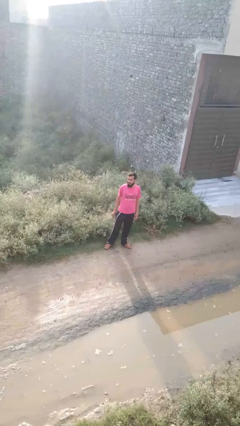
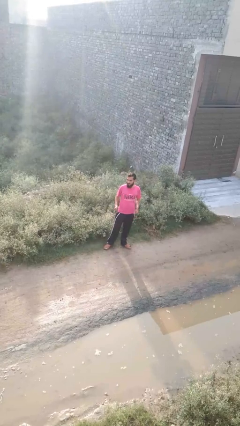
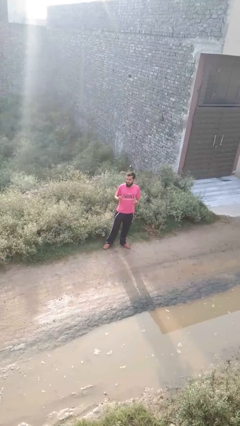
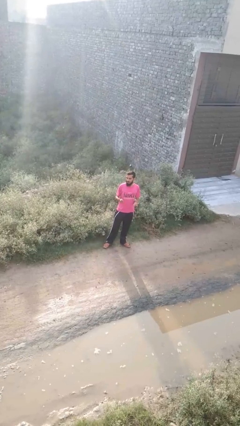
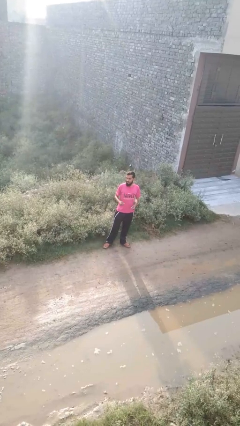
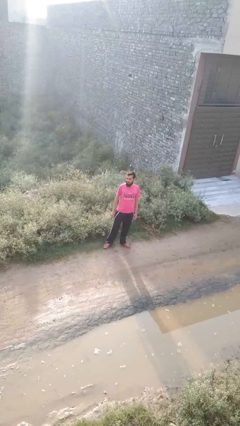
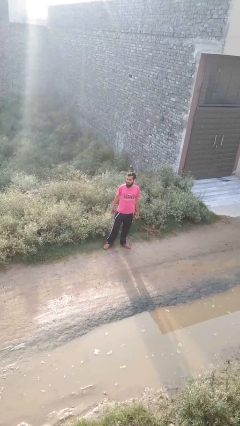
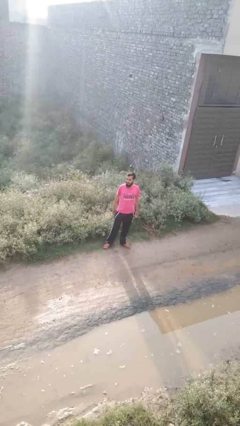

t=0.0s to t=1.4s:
person snaps fingers

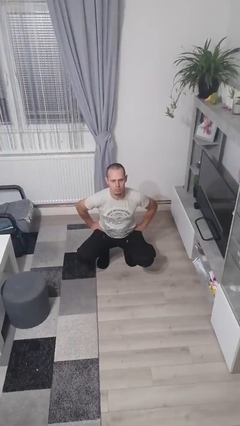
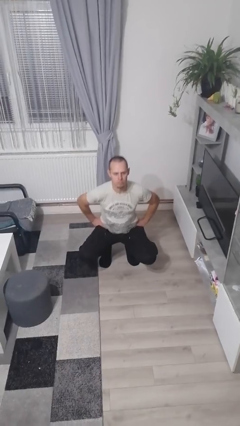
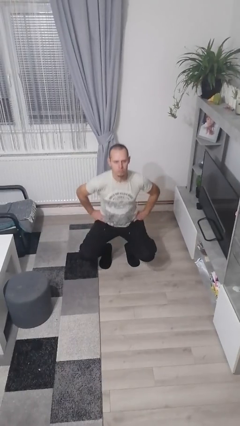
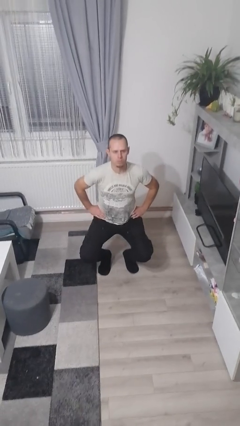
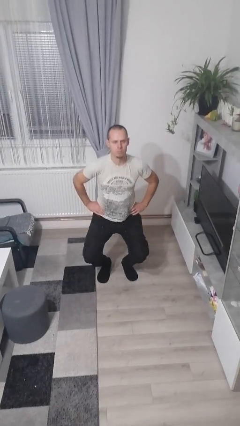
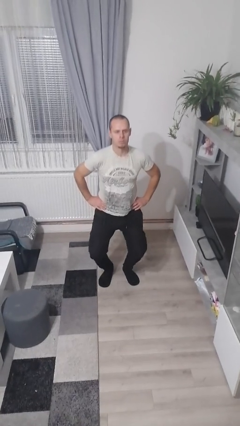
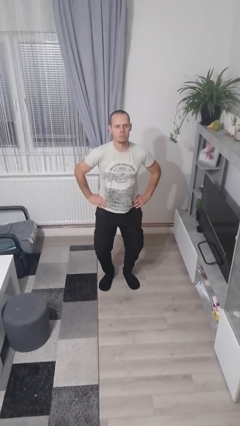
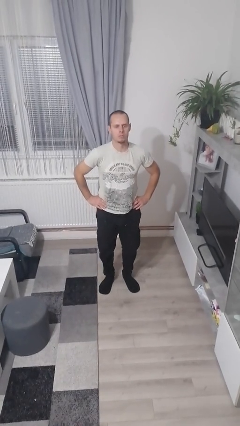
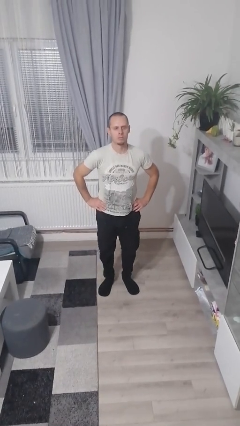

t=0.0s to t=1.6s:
person stands up

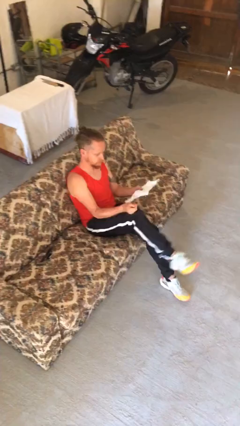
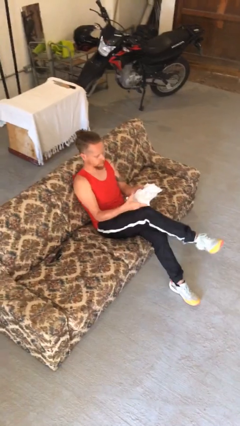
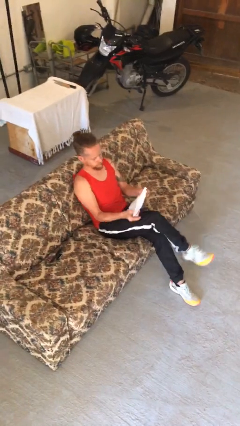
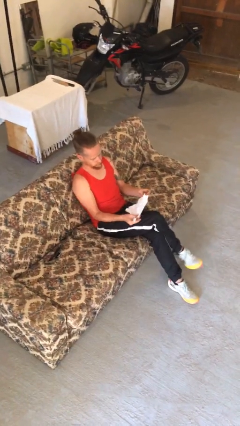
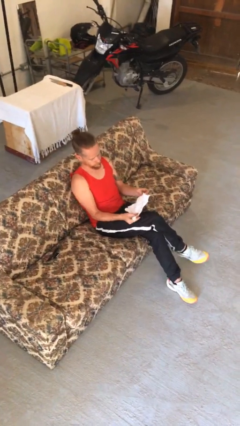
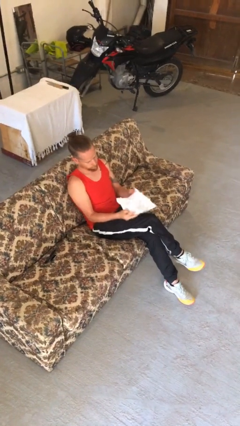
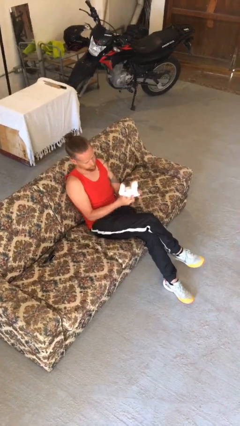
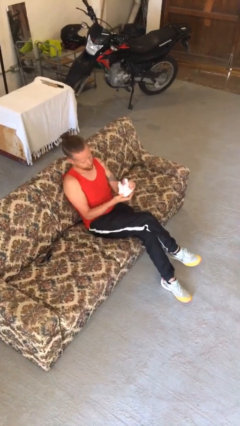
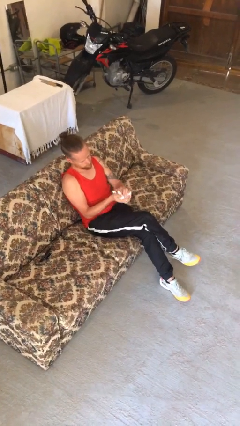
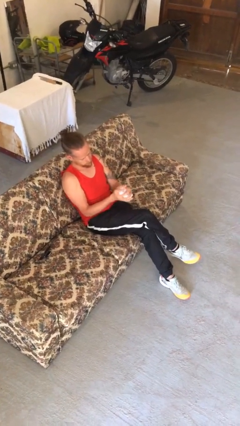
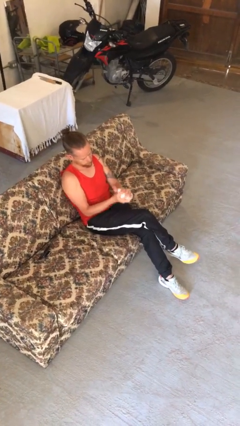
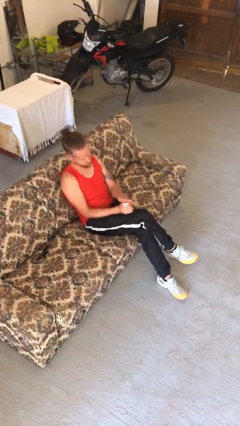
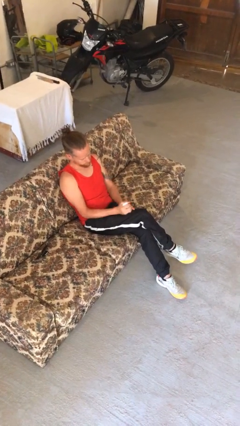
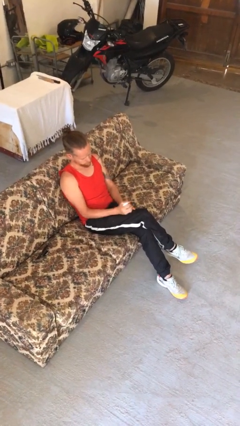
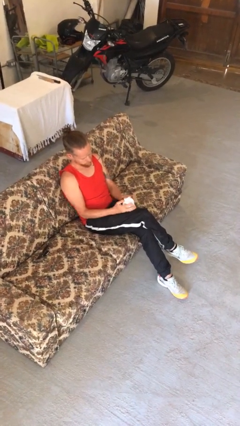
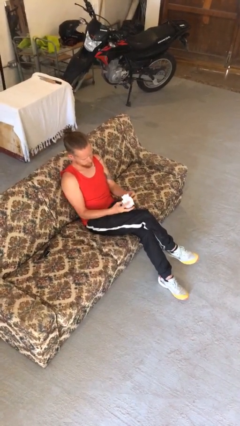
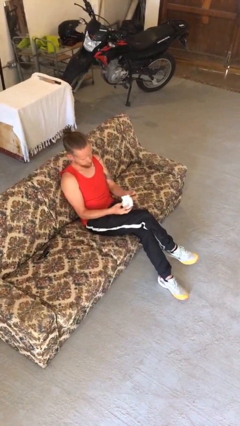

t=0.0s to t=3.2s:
person crumples paper

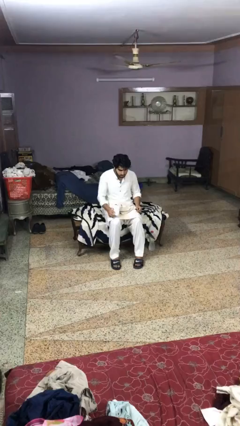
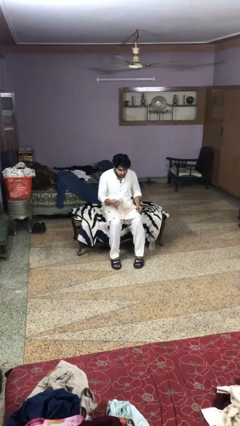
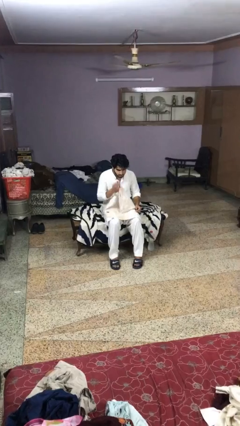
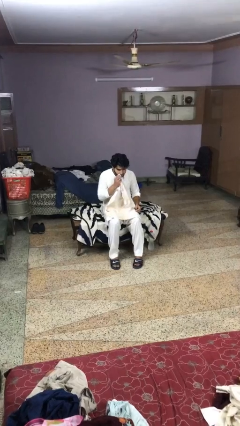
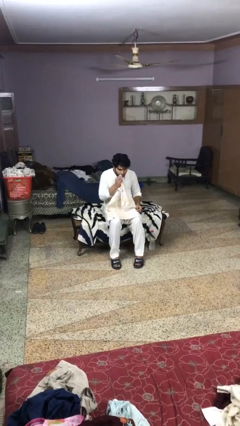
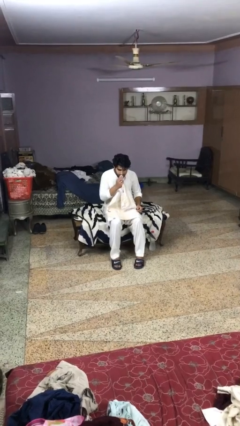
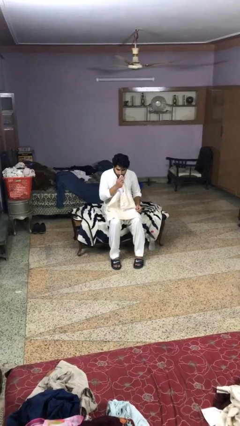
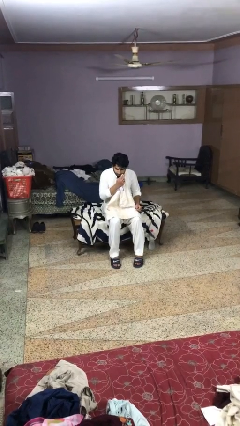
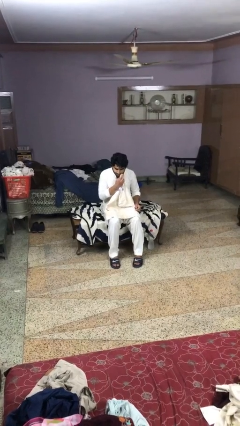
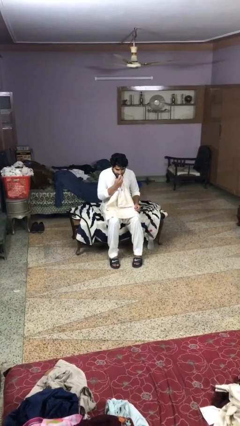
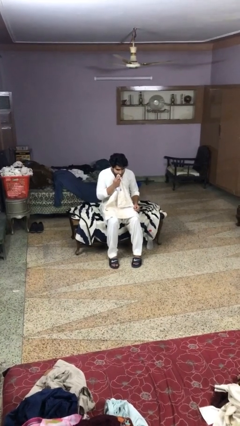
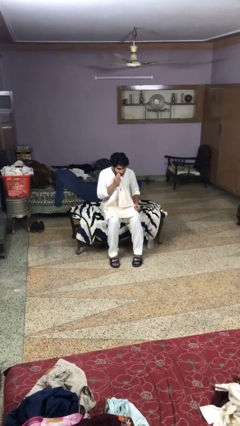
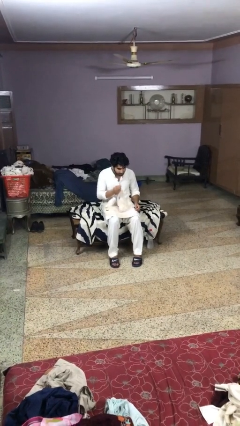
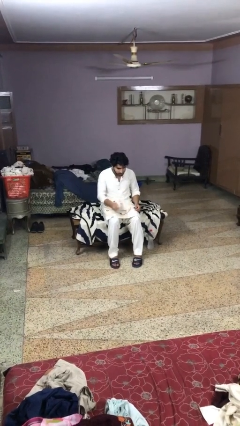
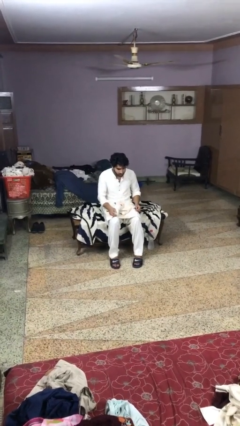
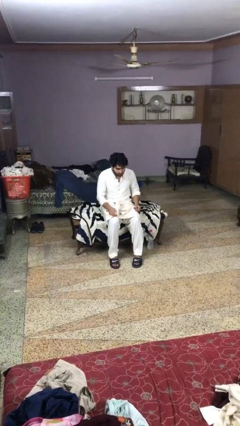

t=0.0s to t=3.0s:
person wipes mouth with napkin

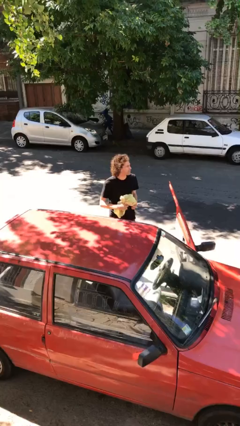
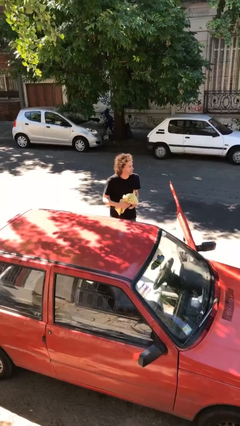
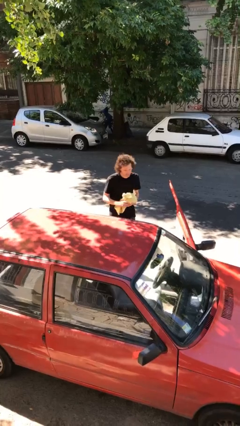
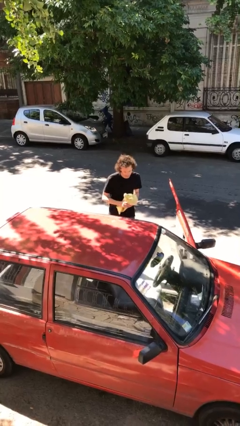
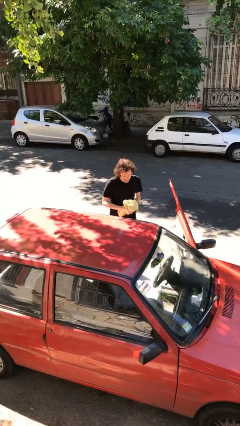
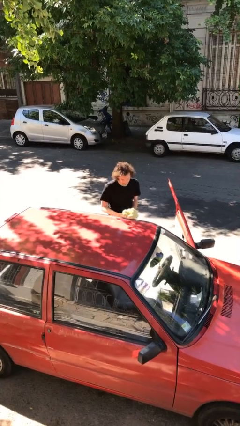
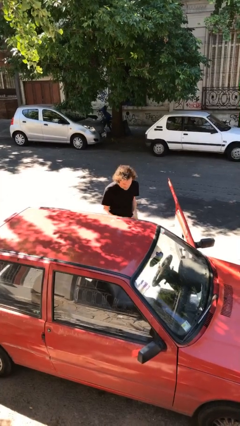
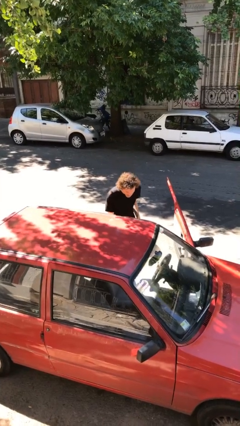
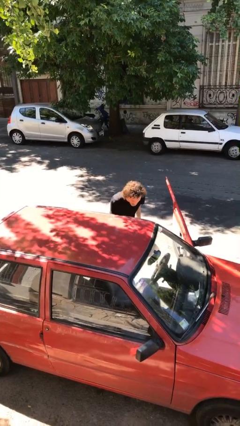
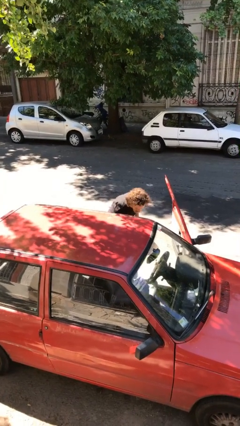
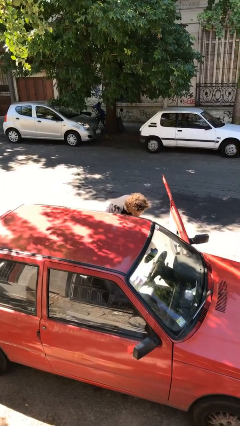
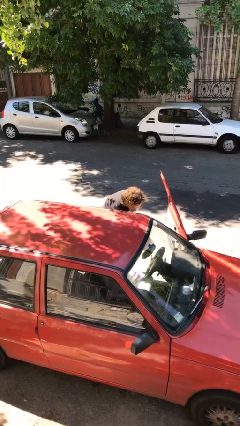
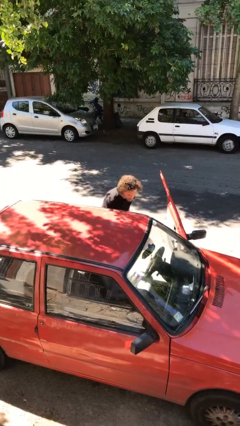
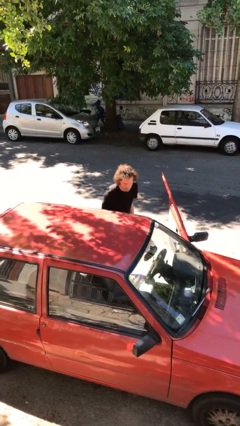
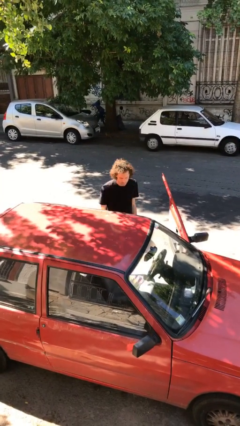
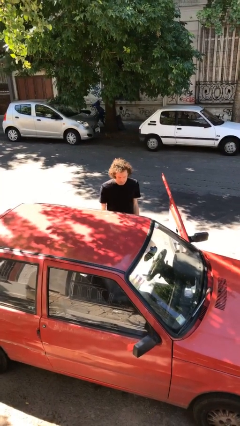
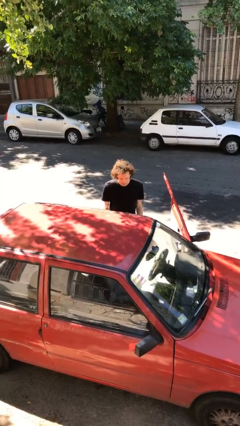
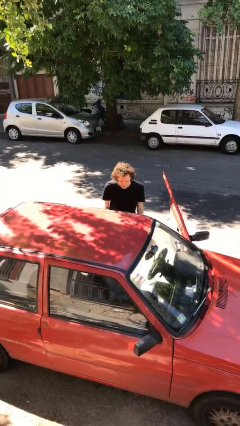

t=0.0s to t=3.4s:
person loads car

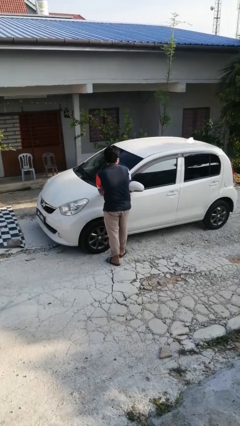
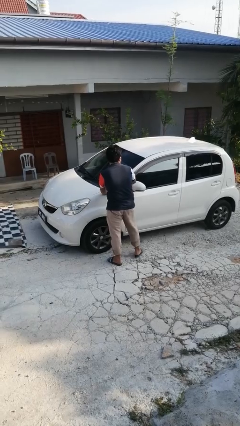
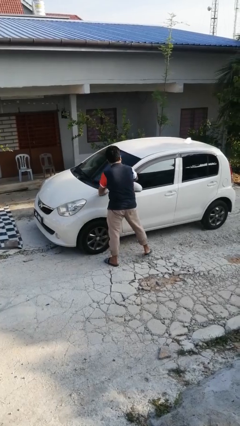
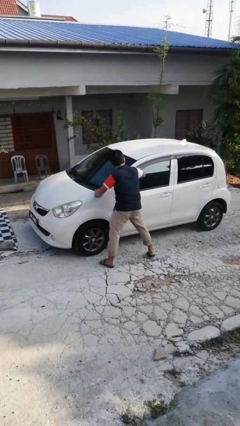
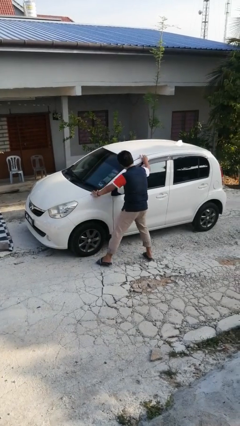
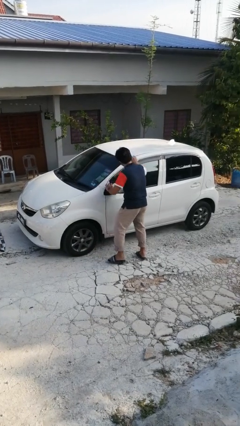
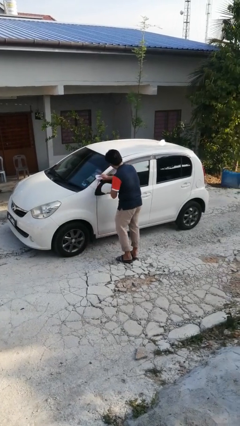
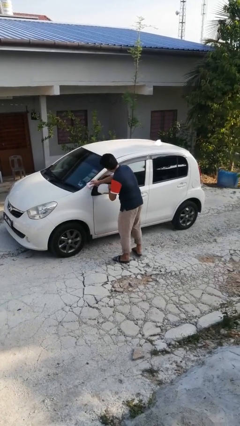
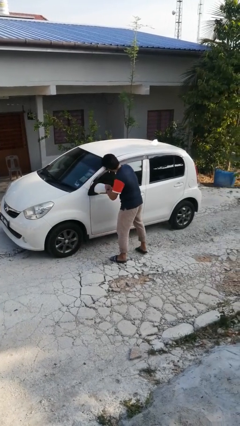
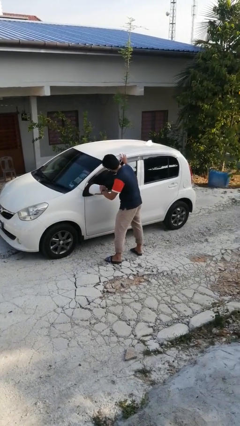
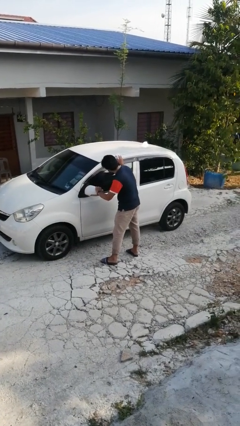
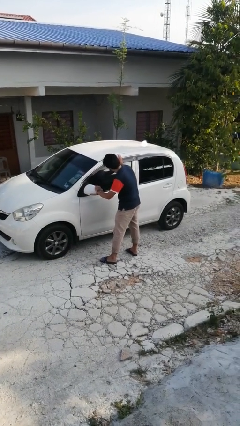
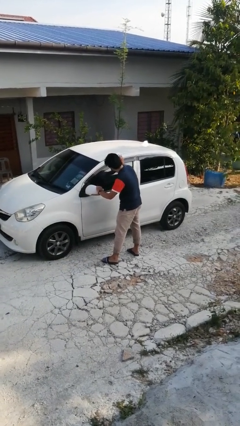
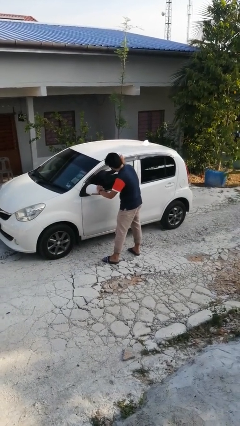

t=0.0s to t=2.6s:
person polishes car with rag

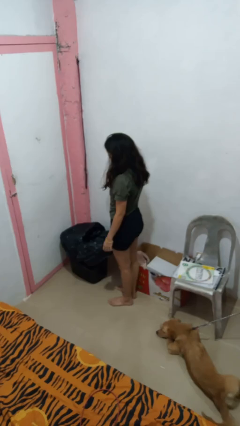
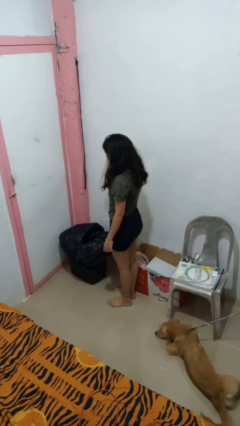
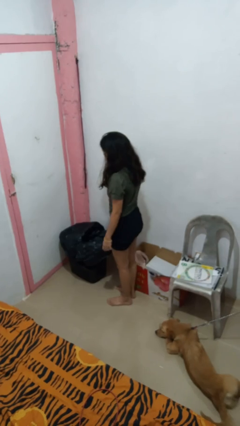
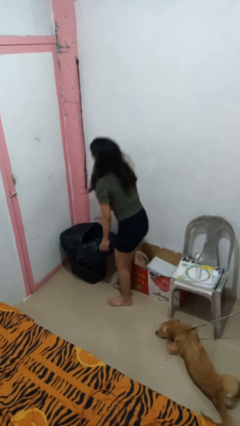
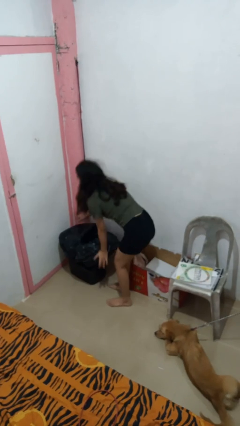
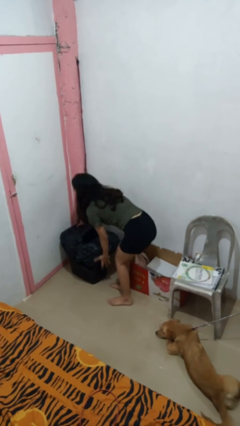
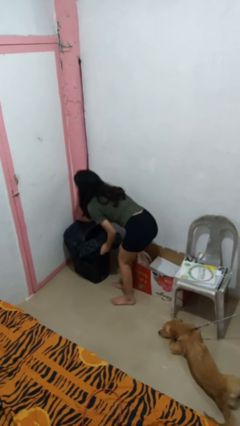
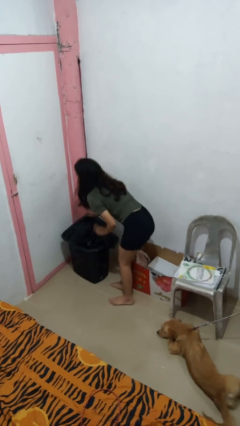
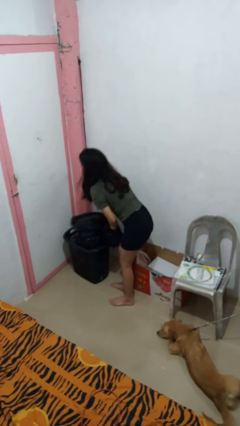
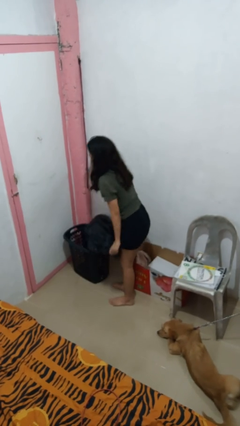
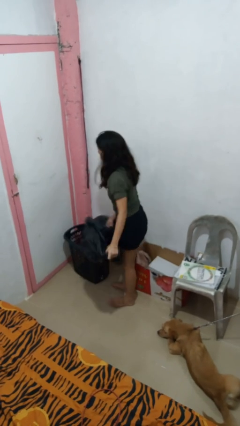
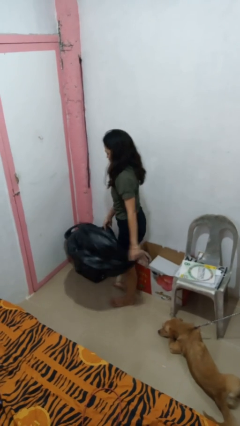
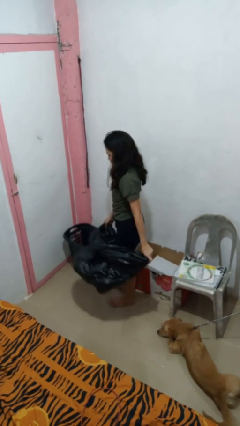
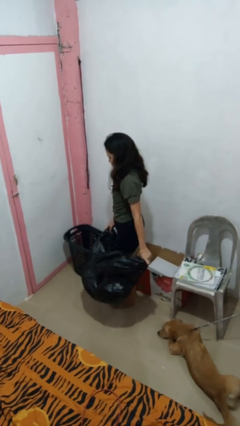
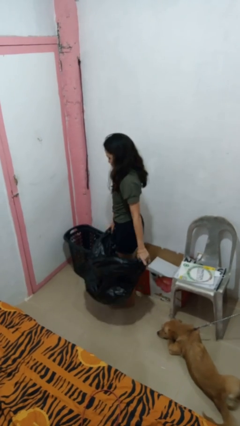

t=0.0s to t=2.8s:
person removes trashbag from trashcan
